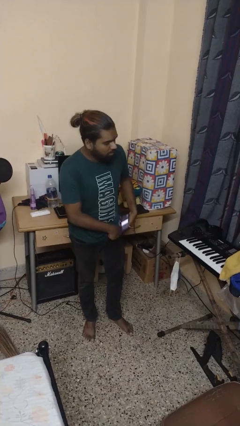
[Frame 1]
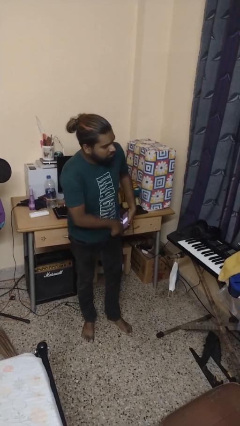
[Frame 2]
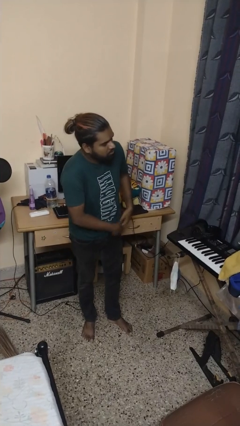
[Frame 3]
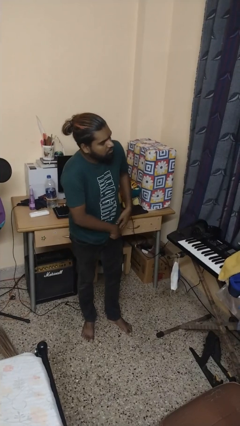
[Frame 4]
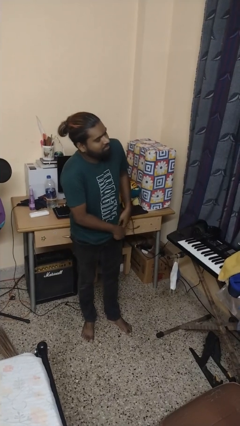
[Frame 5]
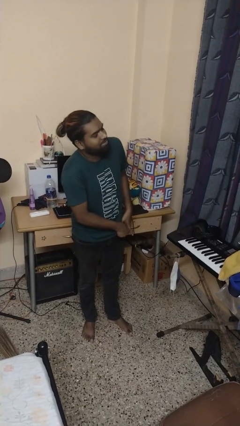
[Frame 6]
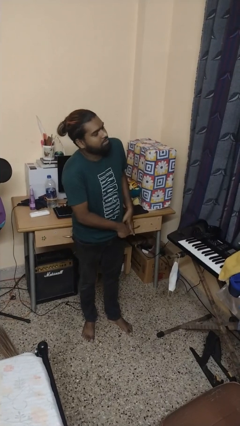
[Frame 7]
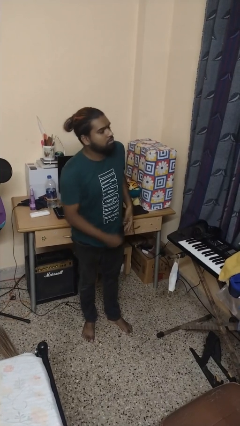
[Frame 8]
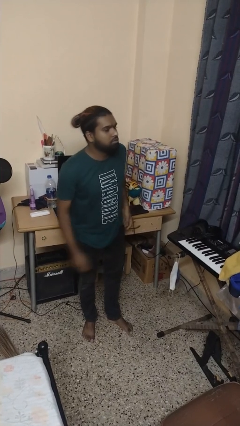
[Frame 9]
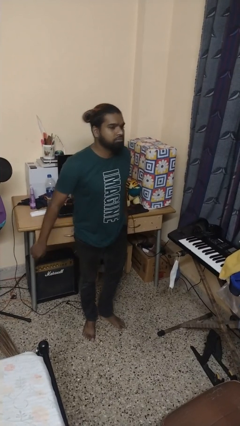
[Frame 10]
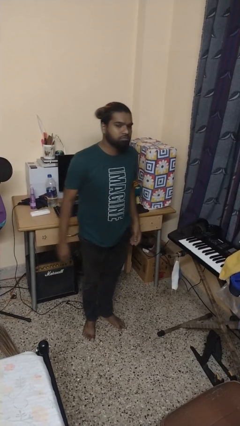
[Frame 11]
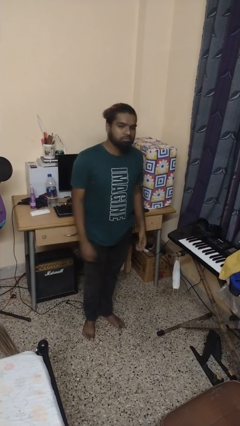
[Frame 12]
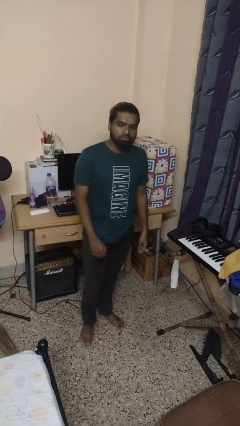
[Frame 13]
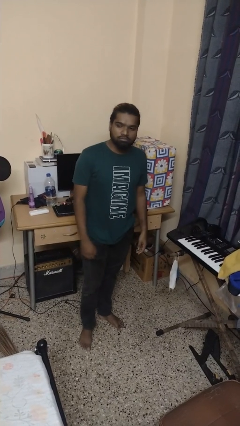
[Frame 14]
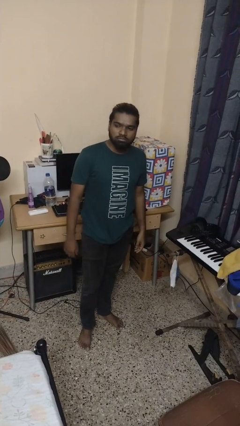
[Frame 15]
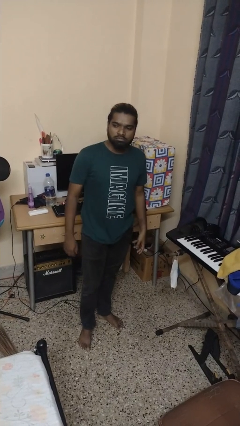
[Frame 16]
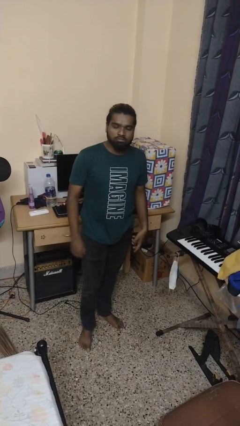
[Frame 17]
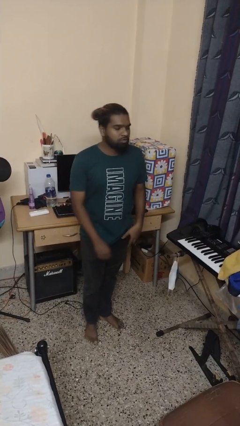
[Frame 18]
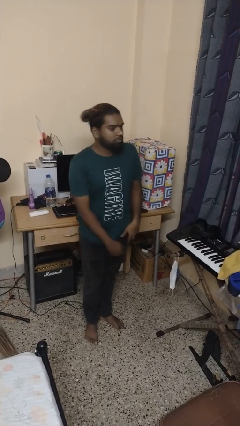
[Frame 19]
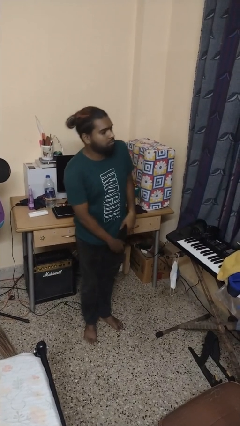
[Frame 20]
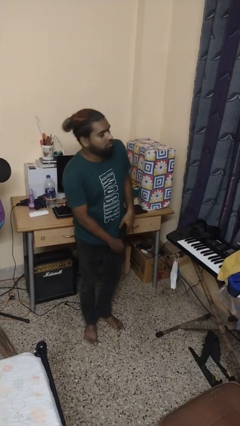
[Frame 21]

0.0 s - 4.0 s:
person puts phone into pocket

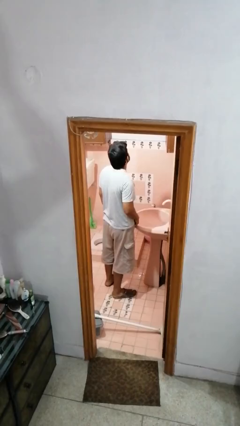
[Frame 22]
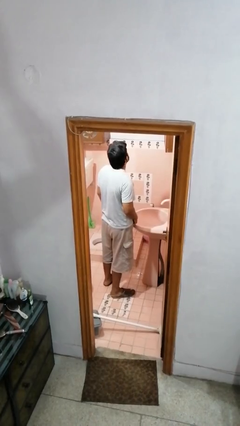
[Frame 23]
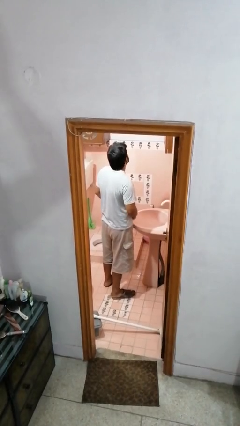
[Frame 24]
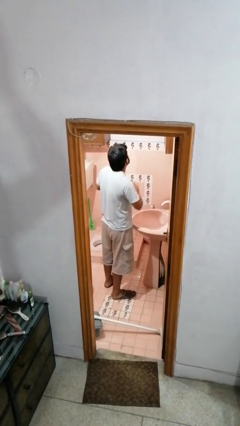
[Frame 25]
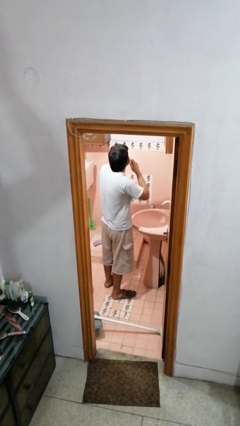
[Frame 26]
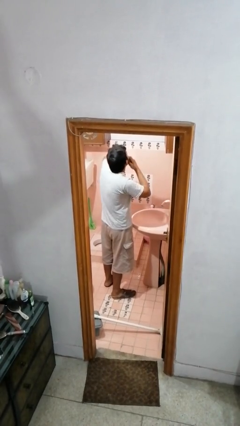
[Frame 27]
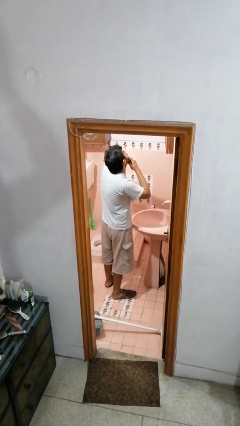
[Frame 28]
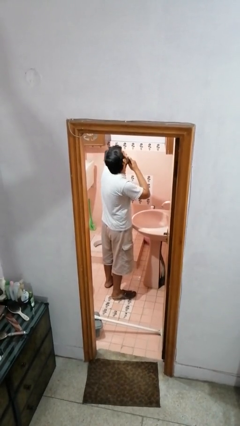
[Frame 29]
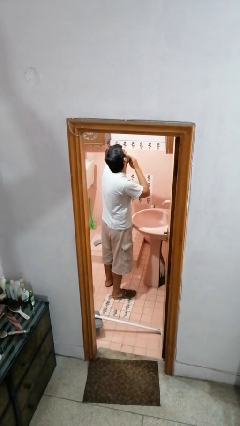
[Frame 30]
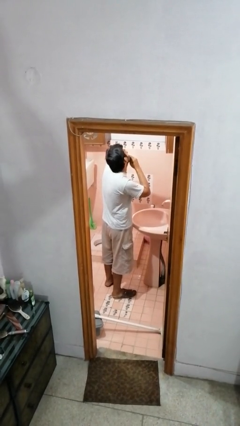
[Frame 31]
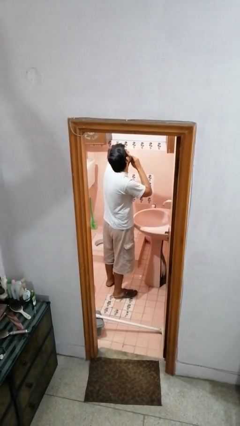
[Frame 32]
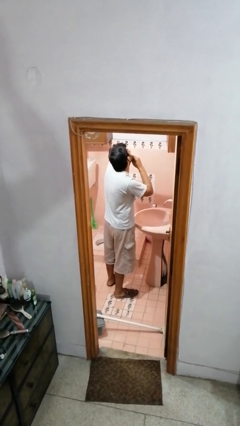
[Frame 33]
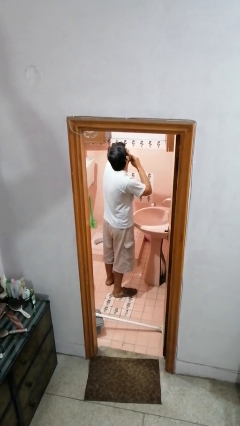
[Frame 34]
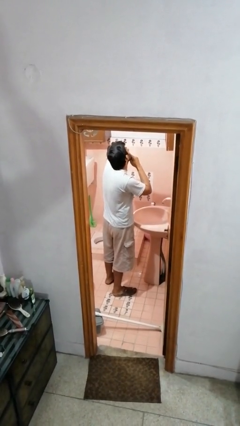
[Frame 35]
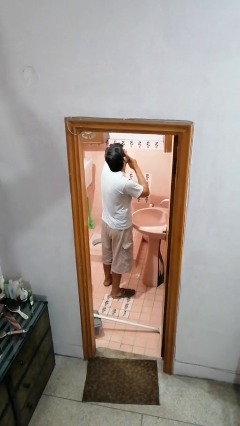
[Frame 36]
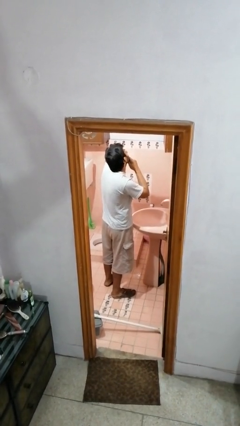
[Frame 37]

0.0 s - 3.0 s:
person flosses

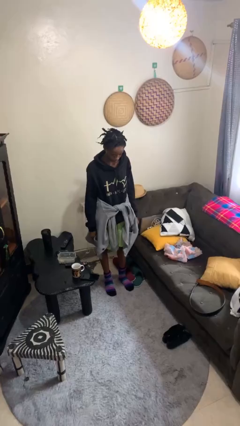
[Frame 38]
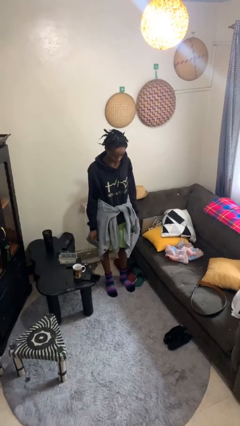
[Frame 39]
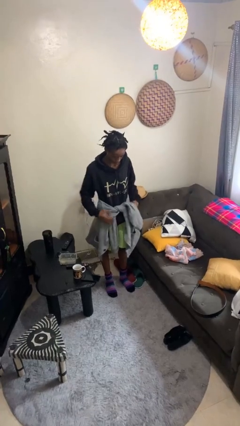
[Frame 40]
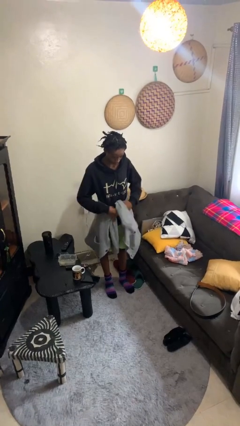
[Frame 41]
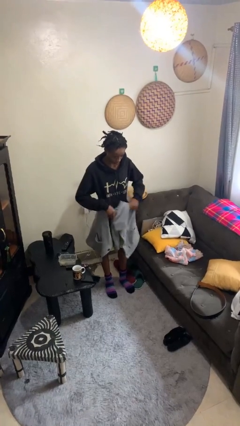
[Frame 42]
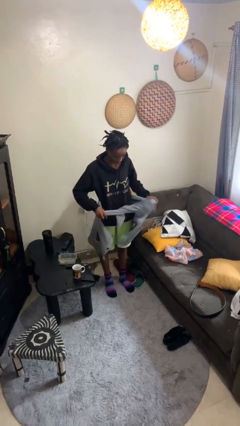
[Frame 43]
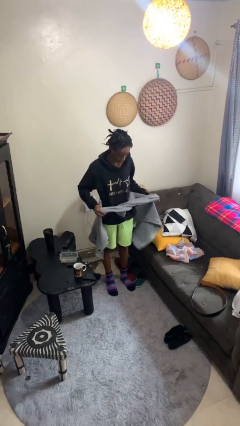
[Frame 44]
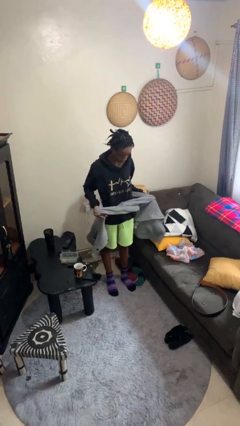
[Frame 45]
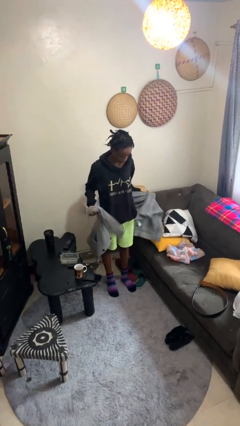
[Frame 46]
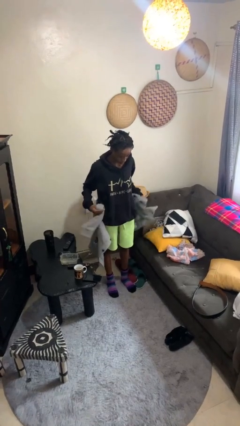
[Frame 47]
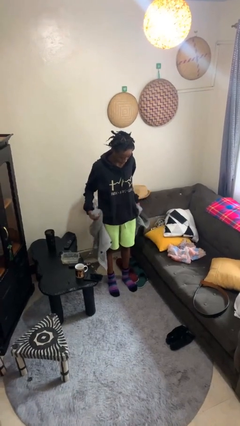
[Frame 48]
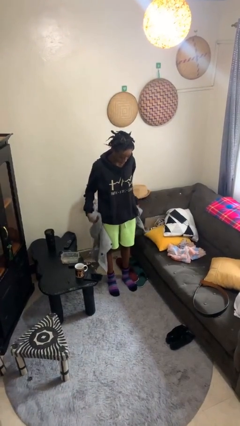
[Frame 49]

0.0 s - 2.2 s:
person unties jacket around waist

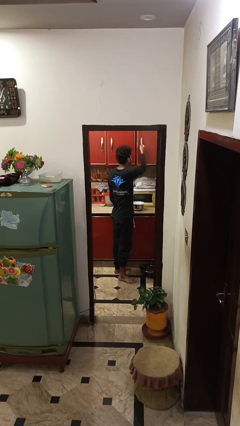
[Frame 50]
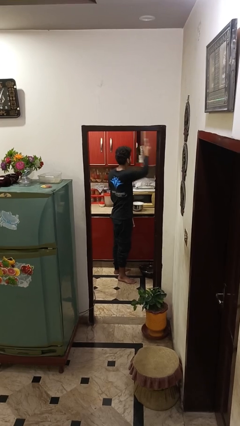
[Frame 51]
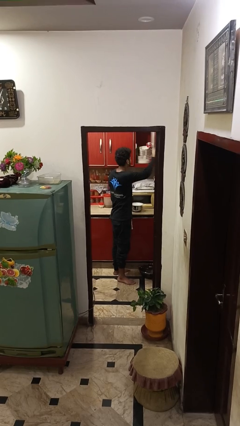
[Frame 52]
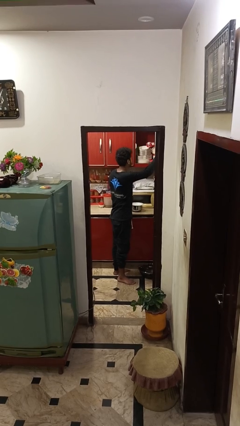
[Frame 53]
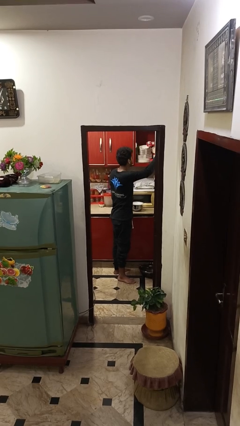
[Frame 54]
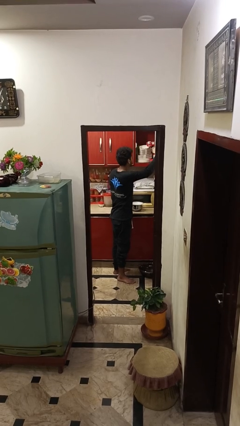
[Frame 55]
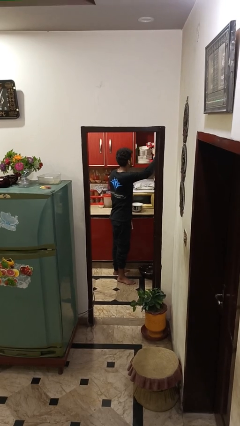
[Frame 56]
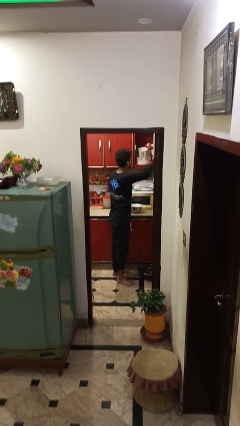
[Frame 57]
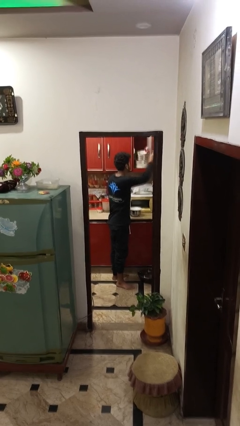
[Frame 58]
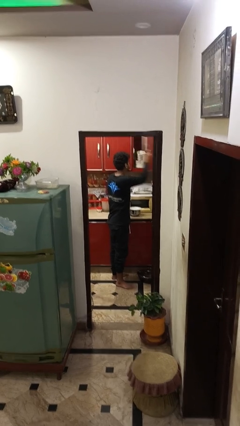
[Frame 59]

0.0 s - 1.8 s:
person opens cabinet

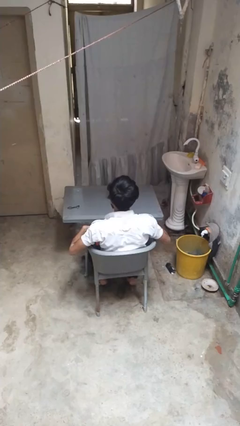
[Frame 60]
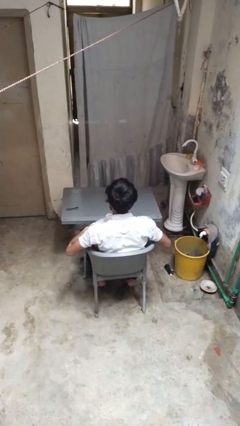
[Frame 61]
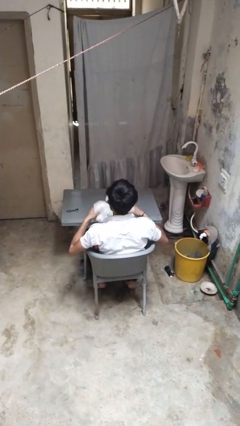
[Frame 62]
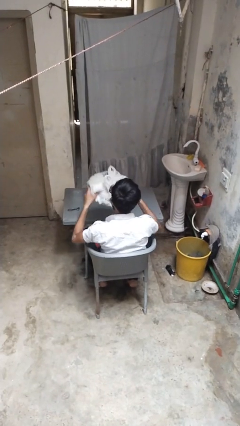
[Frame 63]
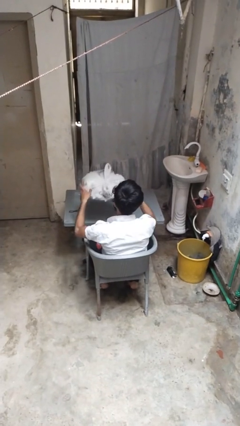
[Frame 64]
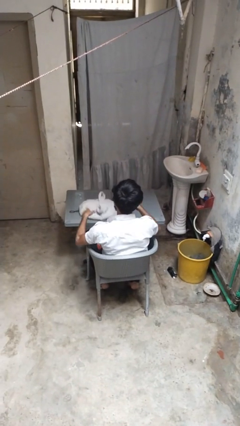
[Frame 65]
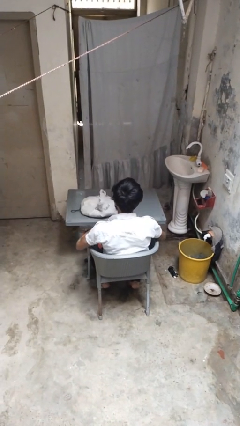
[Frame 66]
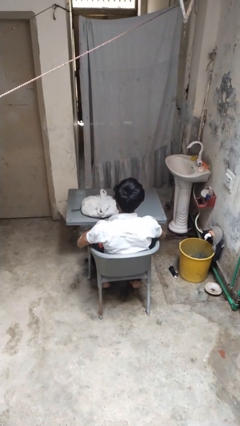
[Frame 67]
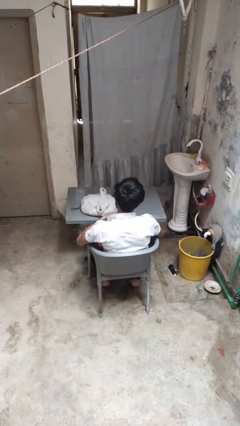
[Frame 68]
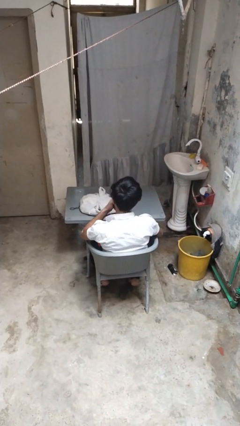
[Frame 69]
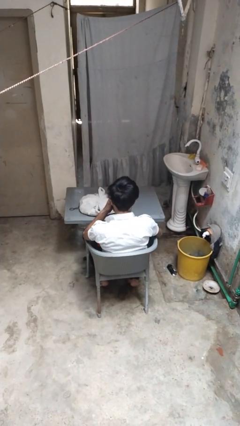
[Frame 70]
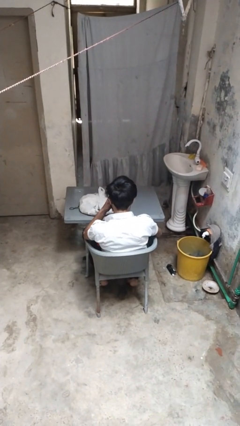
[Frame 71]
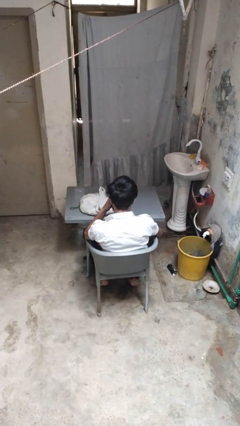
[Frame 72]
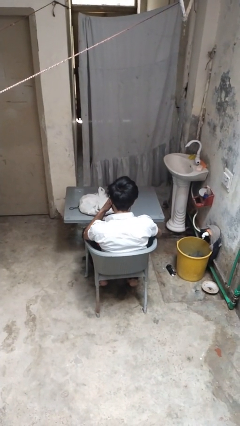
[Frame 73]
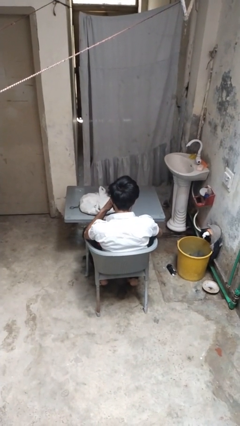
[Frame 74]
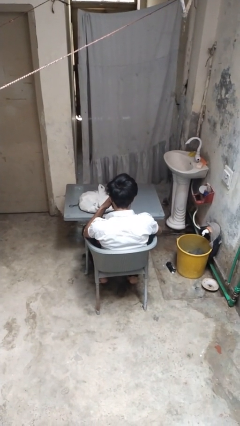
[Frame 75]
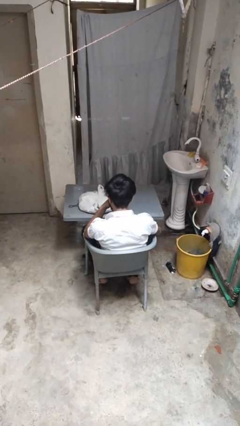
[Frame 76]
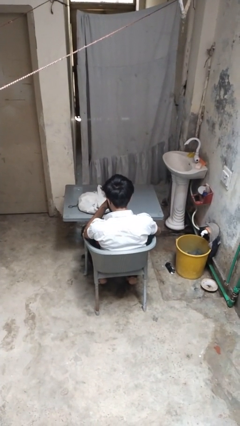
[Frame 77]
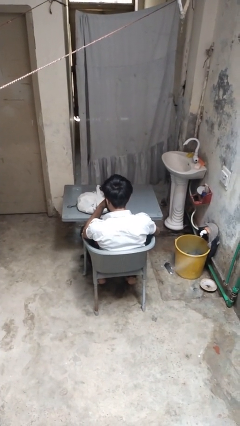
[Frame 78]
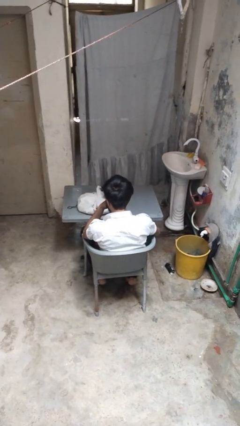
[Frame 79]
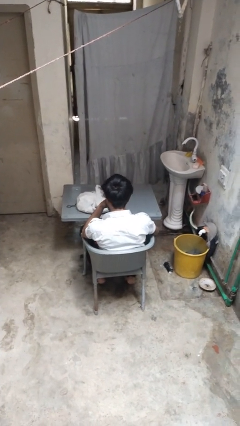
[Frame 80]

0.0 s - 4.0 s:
person throws object on table

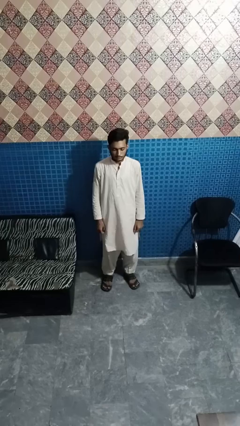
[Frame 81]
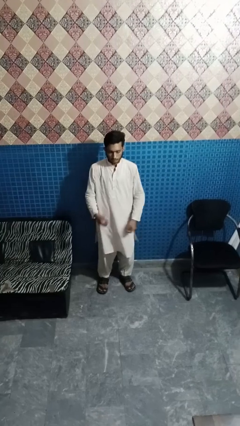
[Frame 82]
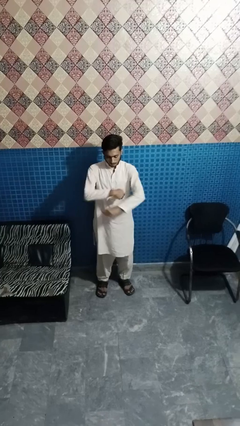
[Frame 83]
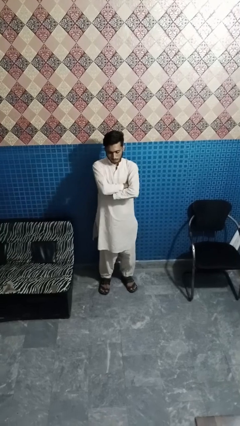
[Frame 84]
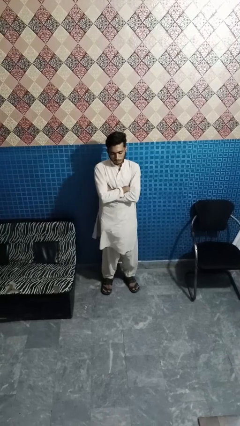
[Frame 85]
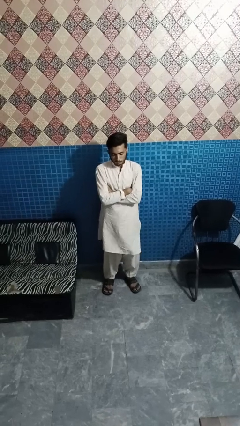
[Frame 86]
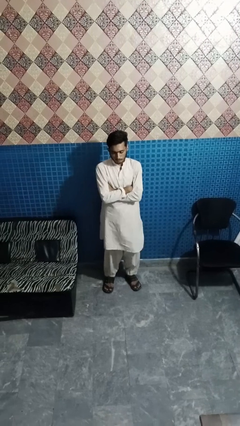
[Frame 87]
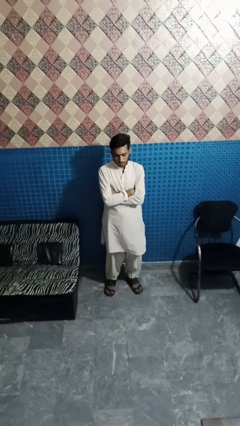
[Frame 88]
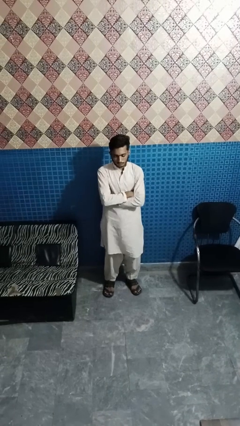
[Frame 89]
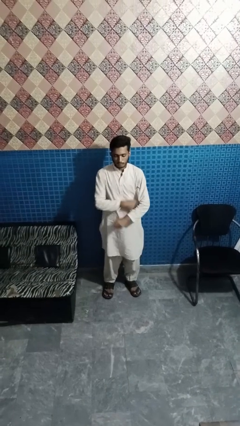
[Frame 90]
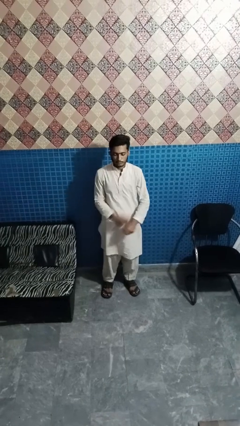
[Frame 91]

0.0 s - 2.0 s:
person crosses arms

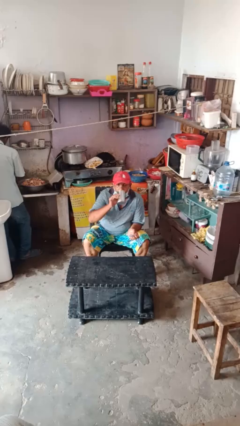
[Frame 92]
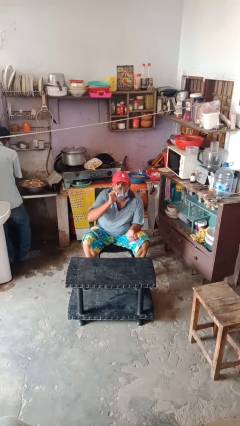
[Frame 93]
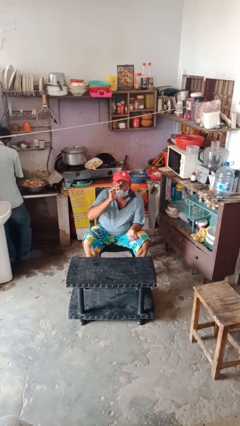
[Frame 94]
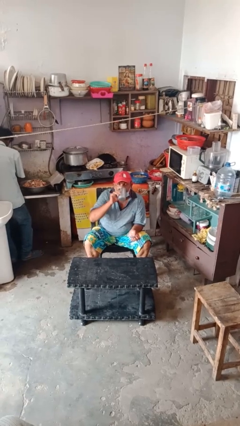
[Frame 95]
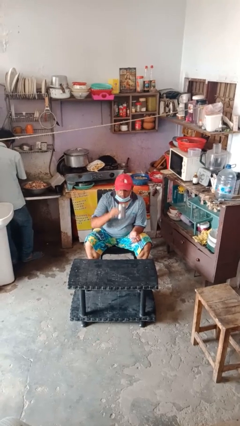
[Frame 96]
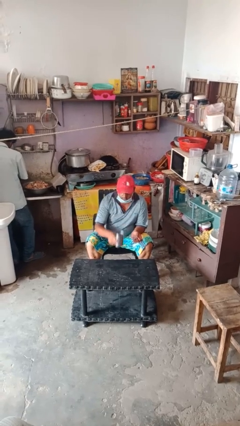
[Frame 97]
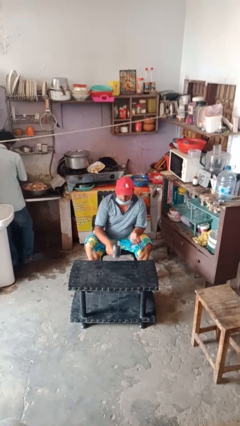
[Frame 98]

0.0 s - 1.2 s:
person drinks from cup
